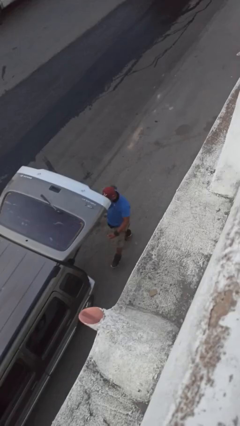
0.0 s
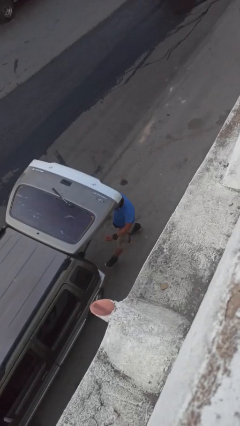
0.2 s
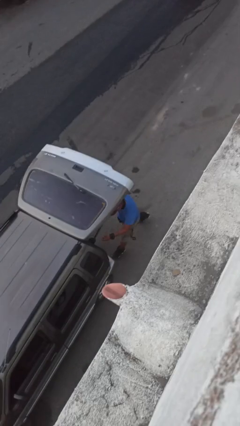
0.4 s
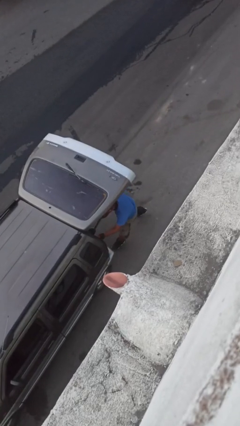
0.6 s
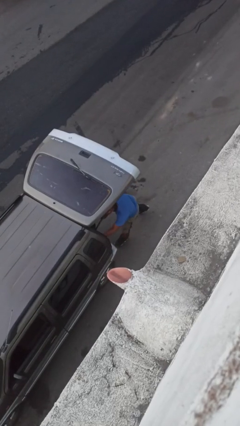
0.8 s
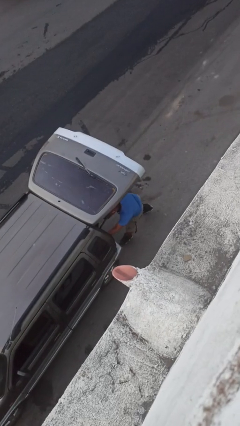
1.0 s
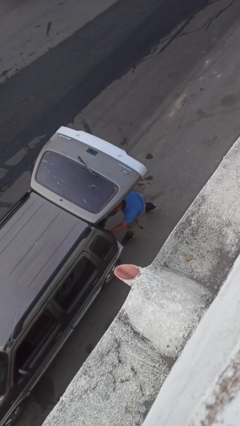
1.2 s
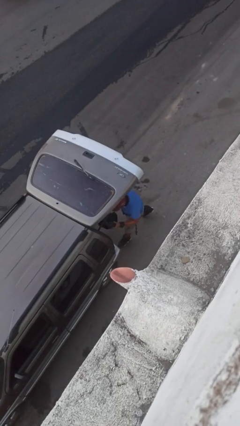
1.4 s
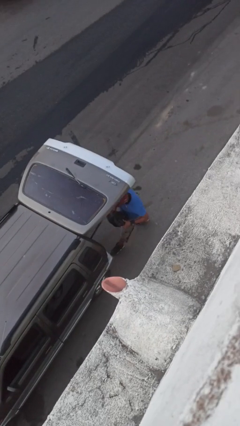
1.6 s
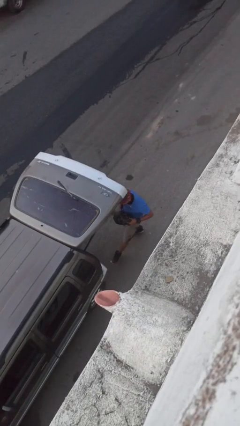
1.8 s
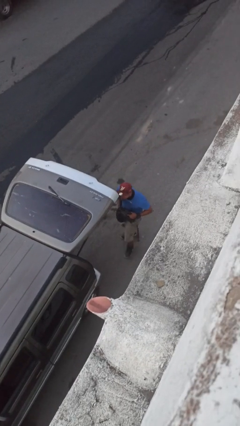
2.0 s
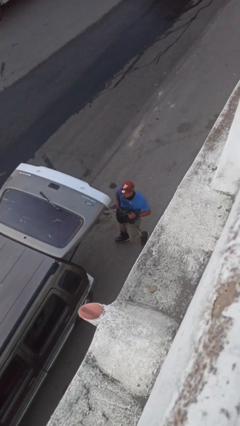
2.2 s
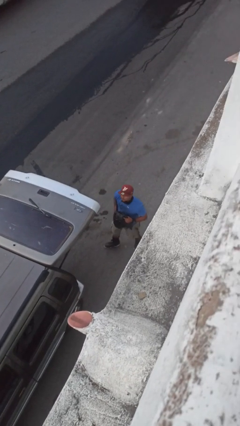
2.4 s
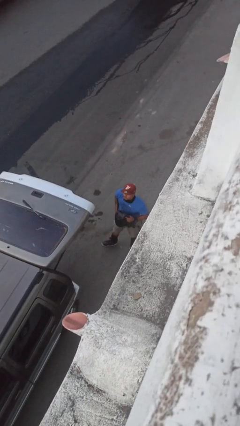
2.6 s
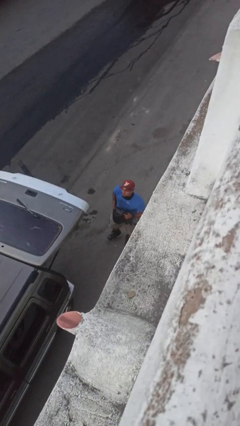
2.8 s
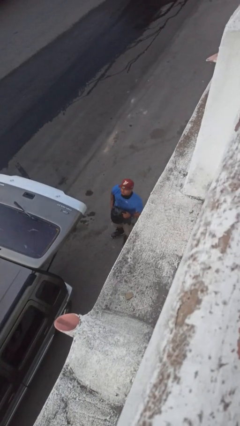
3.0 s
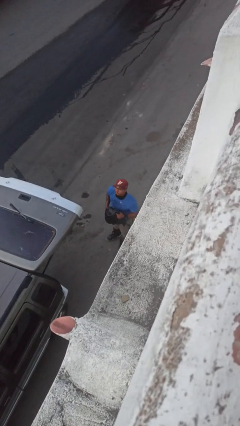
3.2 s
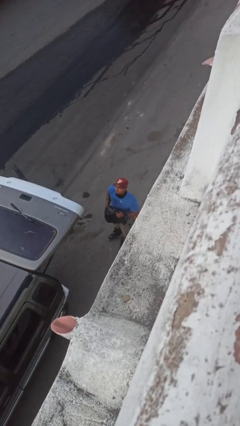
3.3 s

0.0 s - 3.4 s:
person unloads car

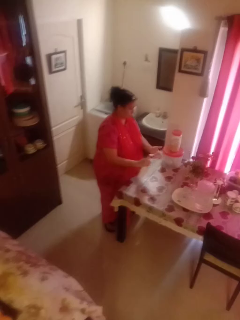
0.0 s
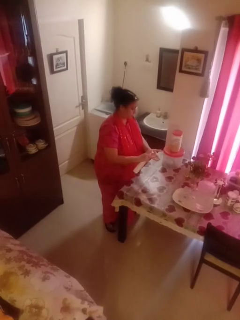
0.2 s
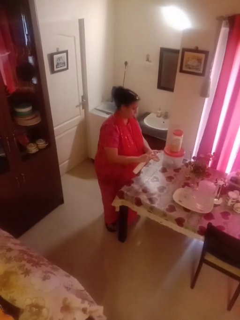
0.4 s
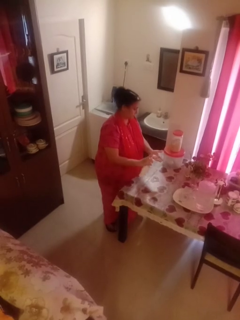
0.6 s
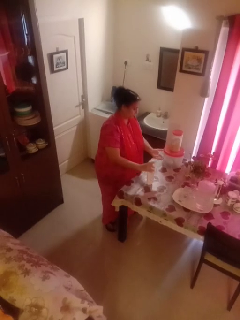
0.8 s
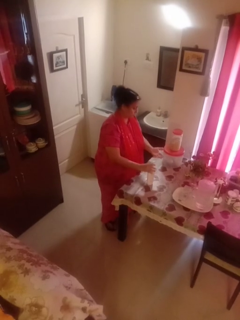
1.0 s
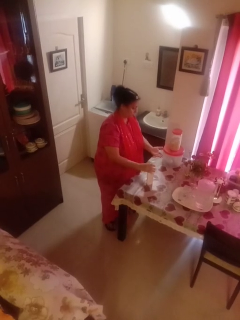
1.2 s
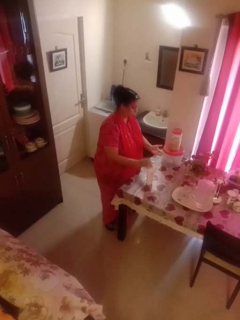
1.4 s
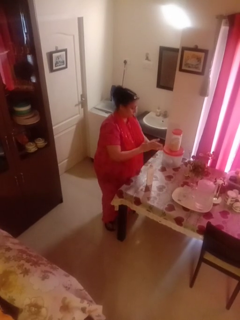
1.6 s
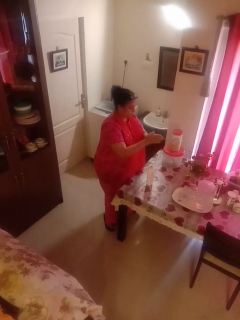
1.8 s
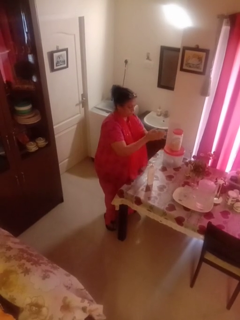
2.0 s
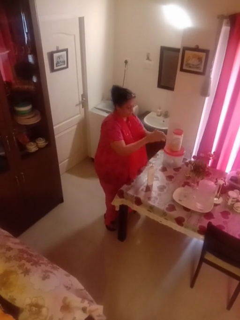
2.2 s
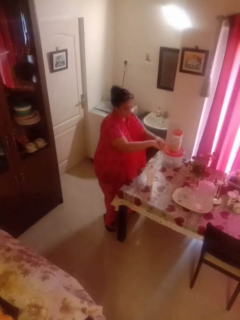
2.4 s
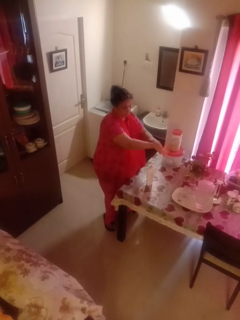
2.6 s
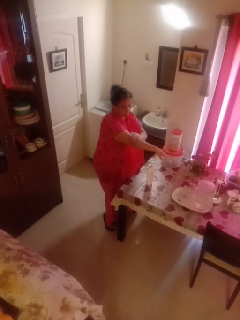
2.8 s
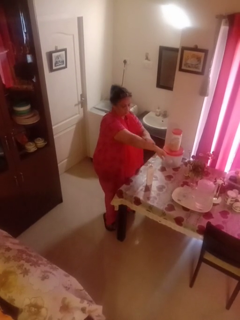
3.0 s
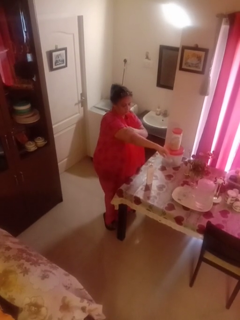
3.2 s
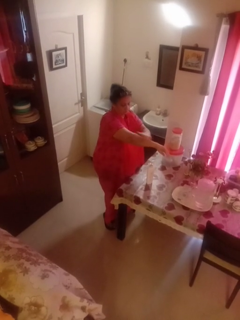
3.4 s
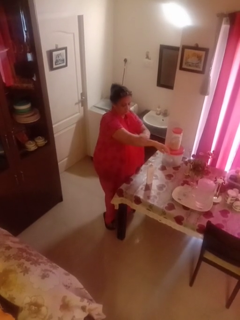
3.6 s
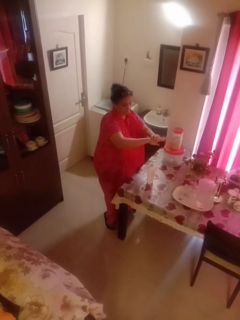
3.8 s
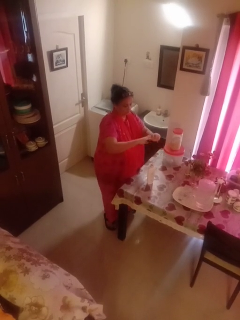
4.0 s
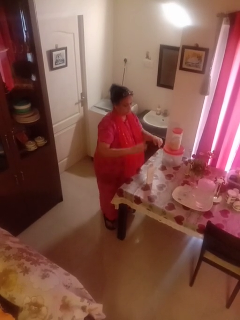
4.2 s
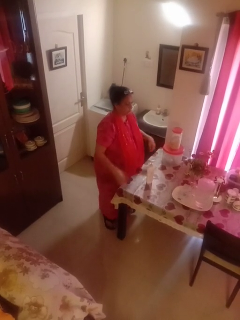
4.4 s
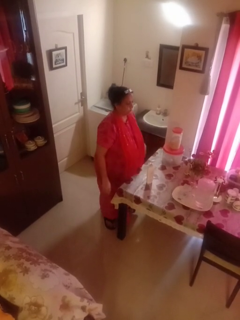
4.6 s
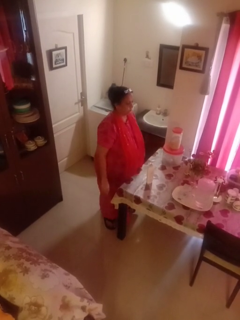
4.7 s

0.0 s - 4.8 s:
person applies sunscreen

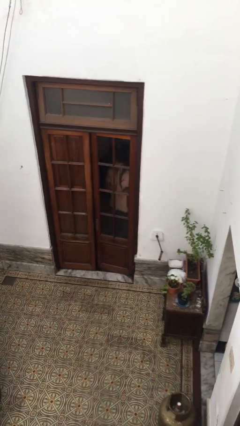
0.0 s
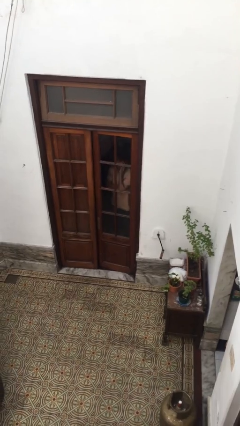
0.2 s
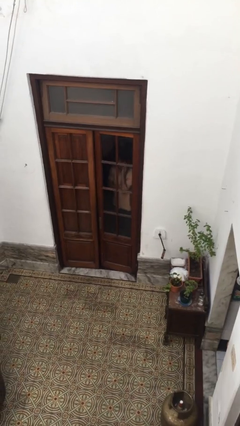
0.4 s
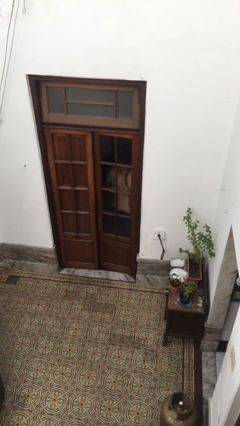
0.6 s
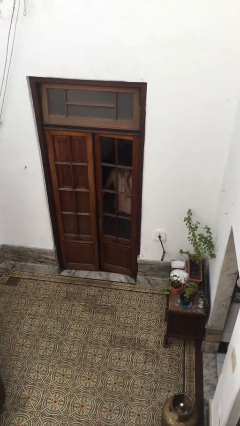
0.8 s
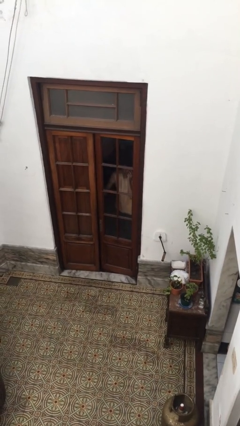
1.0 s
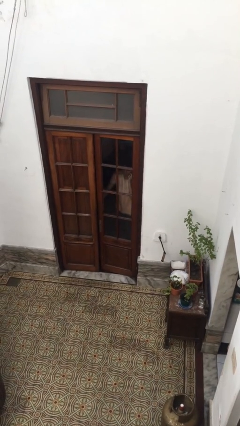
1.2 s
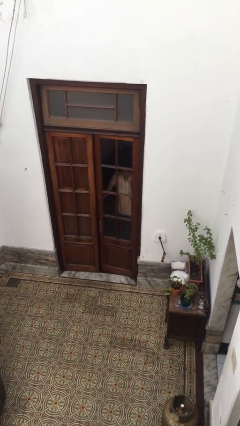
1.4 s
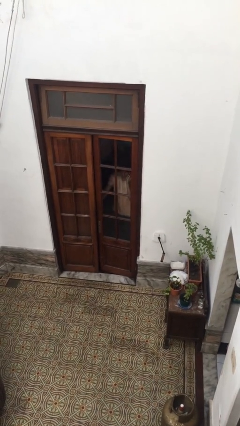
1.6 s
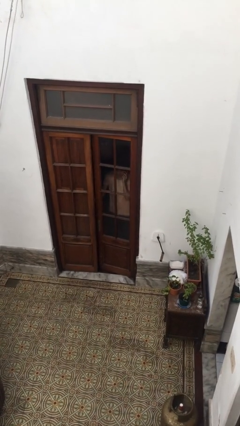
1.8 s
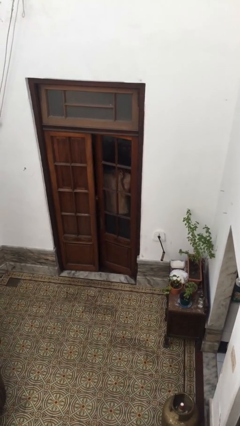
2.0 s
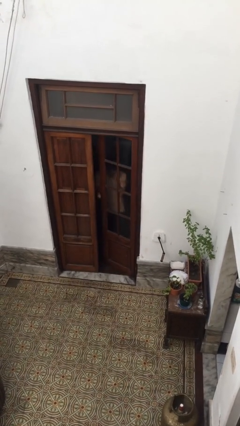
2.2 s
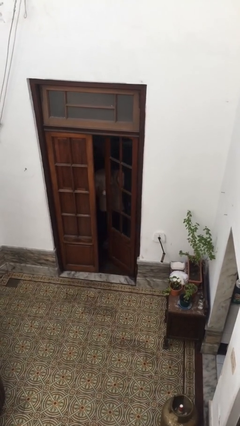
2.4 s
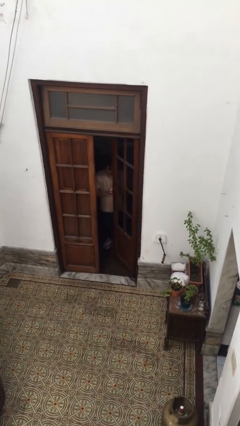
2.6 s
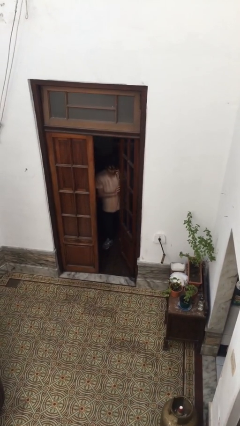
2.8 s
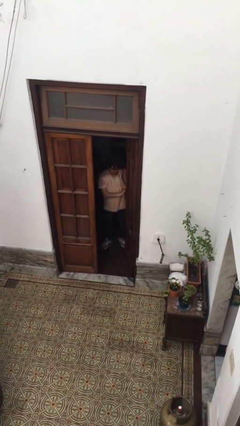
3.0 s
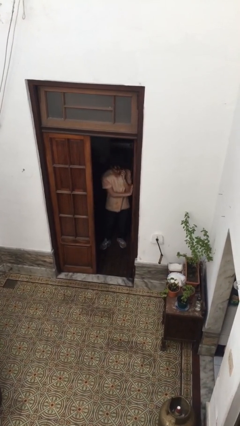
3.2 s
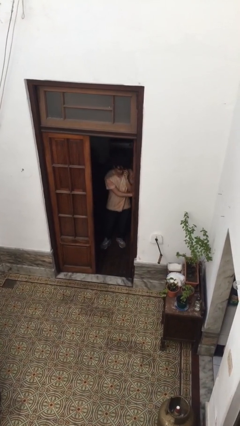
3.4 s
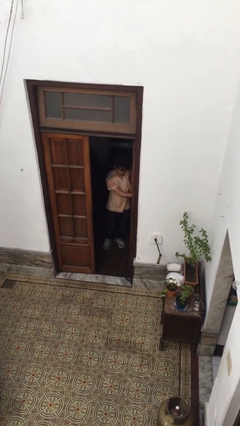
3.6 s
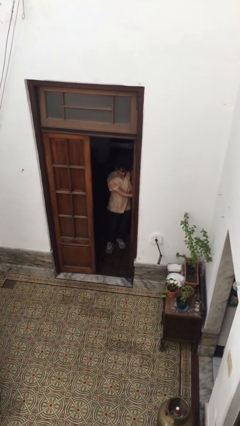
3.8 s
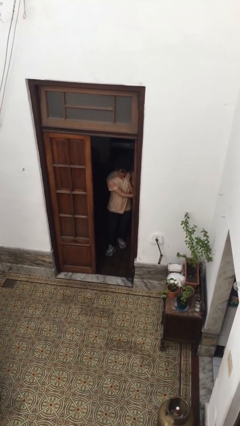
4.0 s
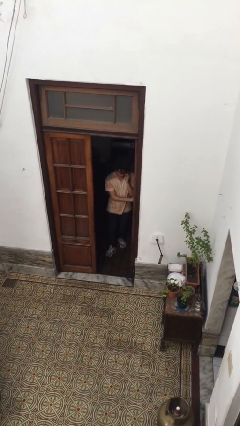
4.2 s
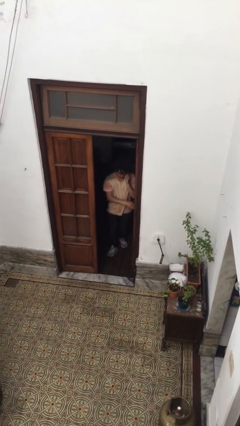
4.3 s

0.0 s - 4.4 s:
person opens facility door

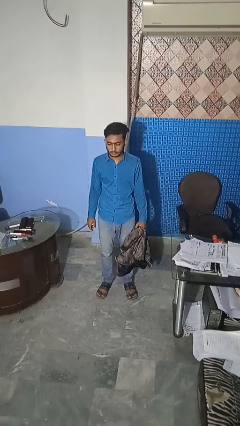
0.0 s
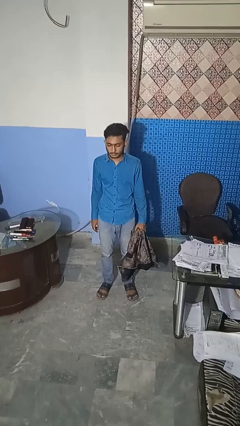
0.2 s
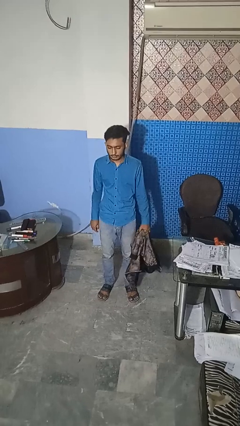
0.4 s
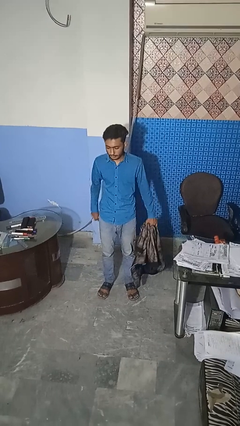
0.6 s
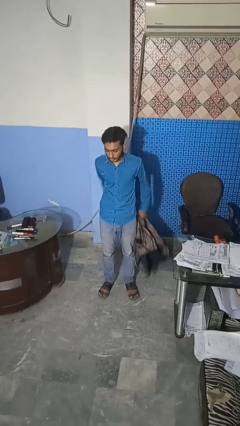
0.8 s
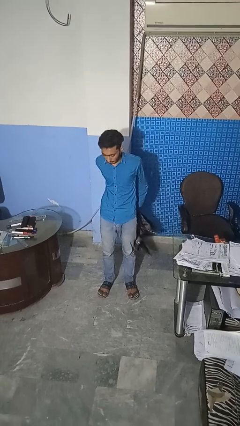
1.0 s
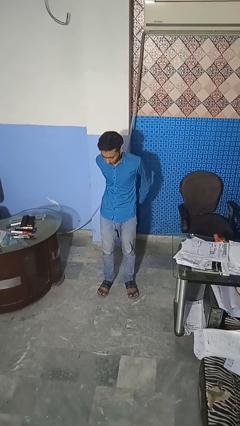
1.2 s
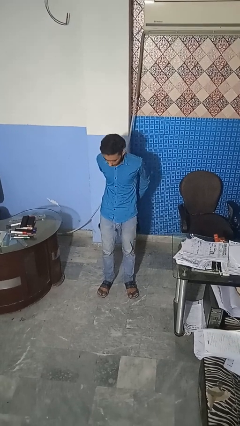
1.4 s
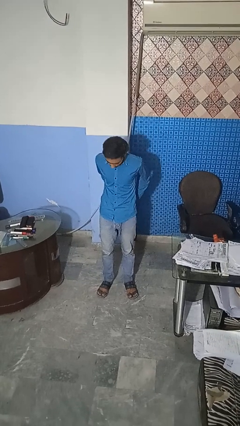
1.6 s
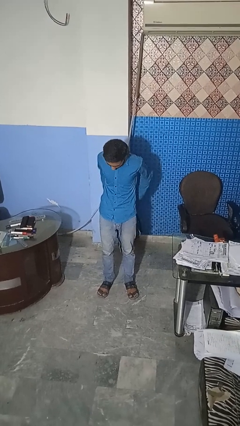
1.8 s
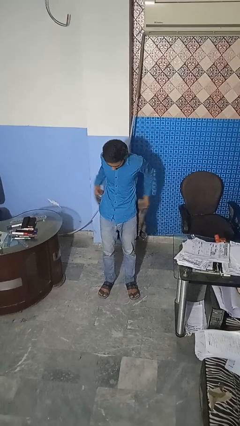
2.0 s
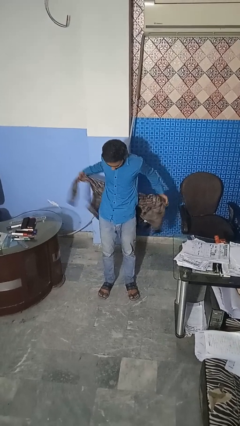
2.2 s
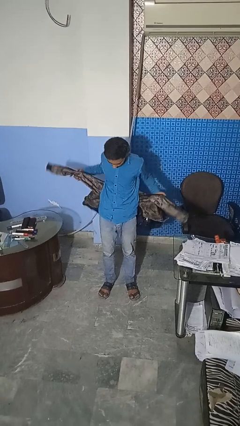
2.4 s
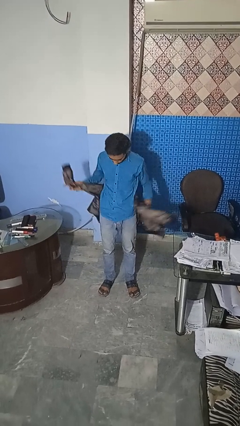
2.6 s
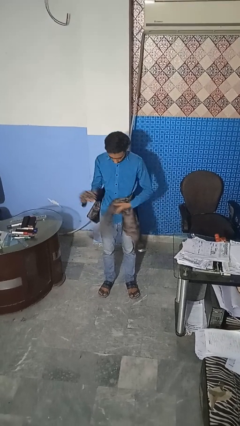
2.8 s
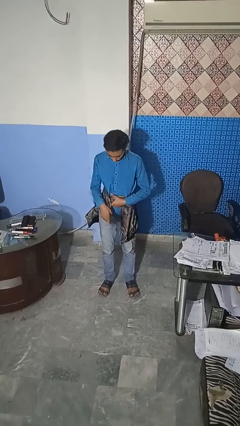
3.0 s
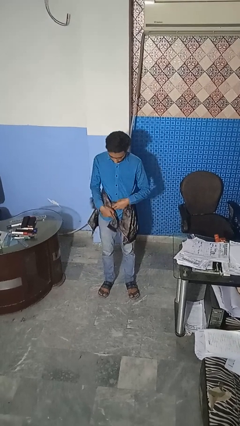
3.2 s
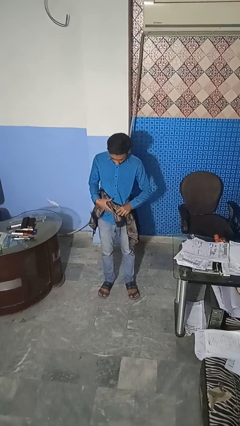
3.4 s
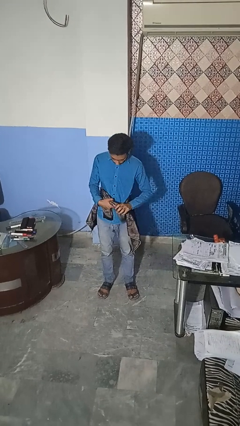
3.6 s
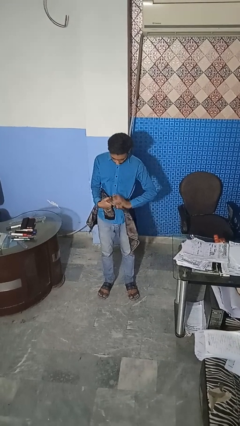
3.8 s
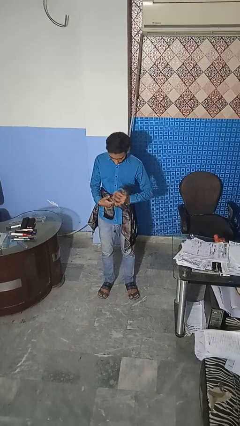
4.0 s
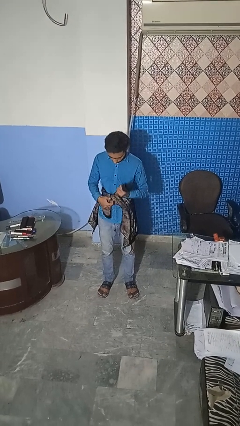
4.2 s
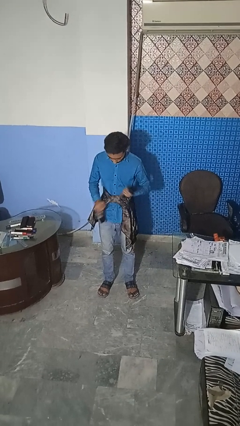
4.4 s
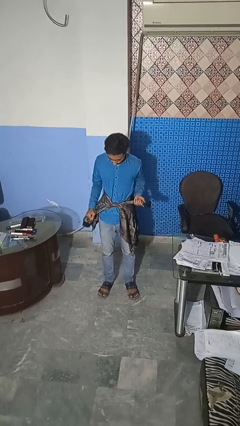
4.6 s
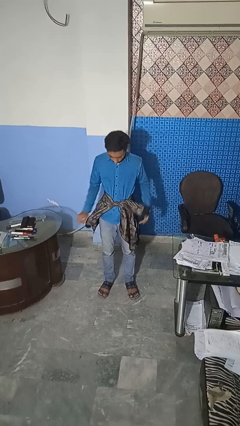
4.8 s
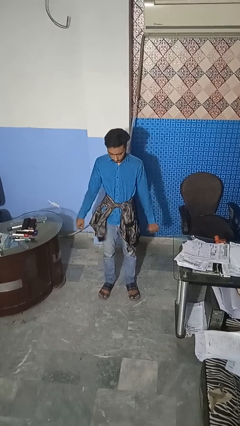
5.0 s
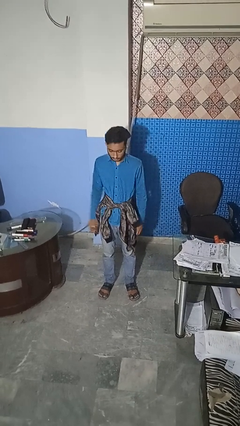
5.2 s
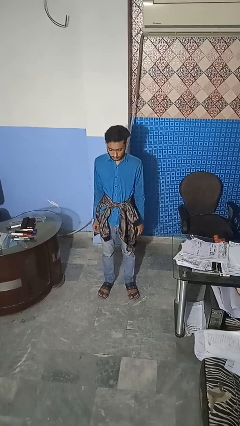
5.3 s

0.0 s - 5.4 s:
person ties jacket around waist

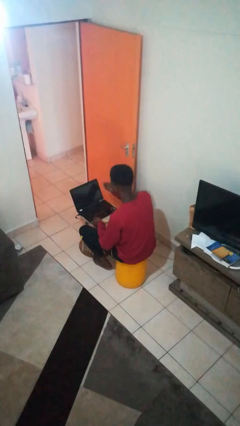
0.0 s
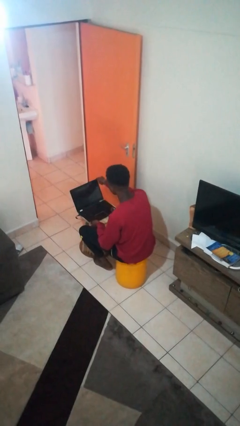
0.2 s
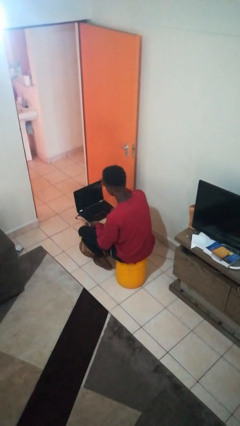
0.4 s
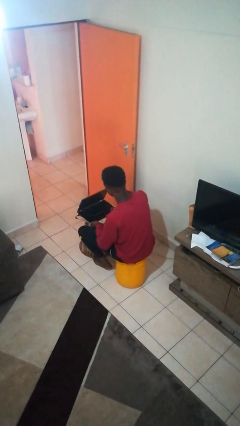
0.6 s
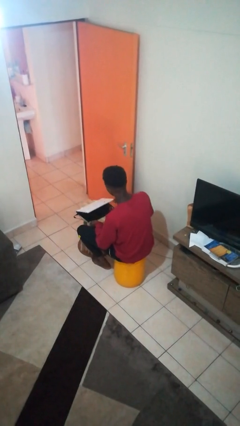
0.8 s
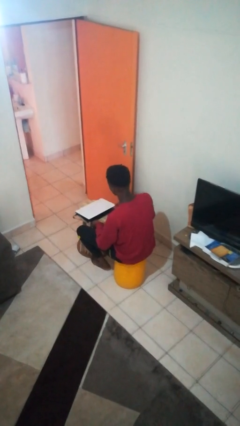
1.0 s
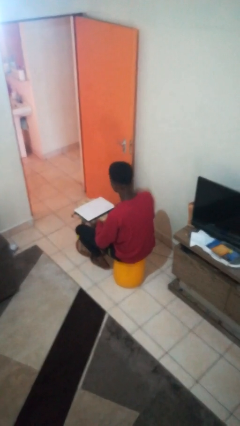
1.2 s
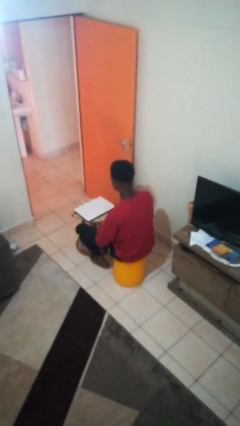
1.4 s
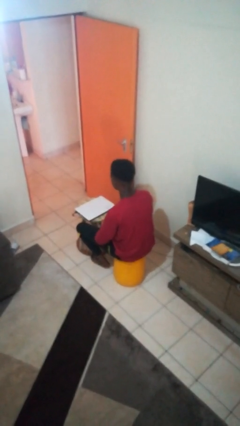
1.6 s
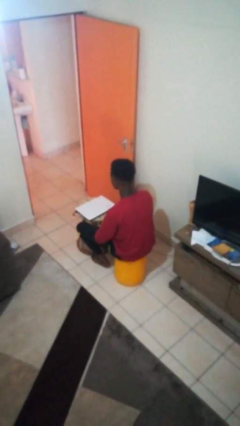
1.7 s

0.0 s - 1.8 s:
person closes laptop
